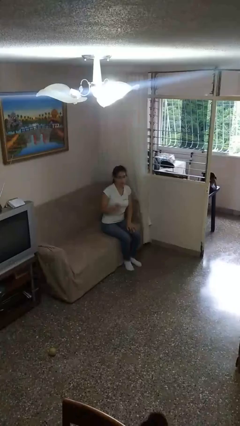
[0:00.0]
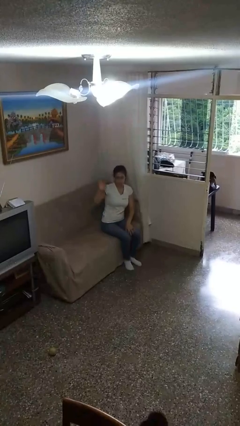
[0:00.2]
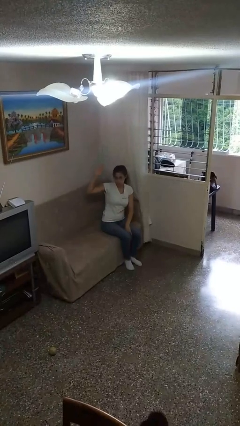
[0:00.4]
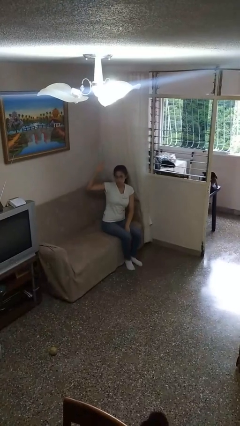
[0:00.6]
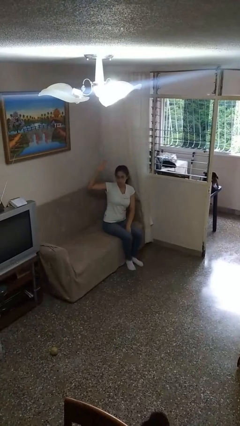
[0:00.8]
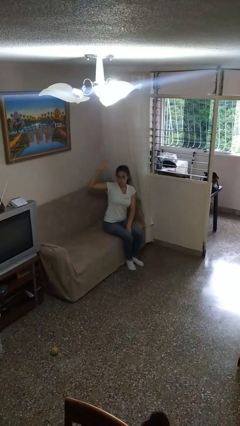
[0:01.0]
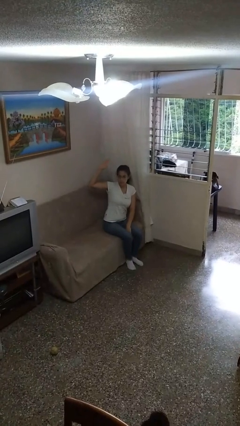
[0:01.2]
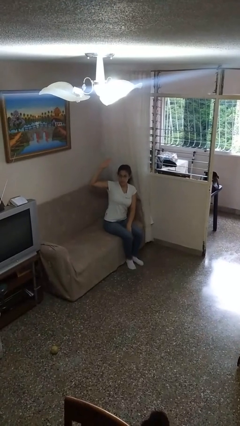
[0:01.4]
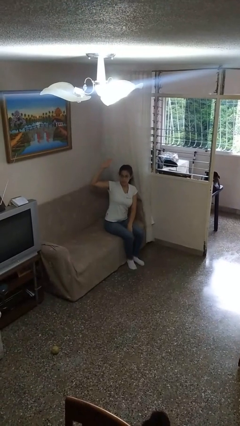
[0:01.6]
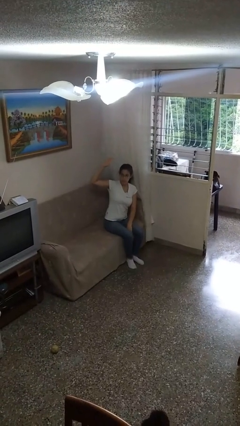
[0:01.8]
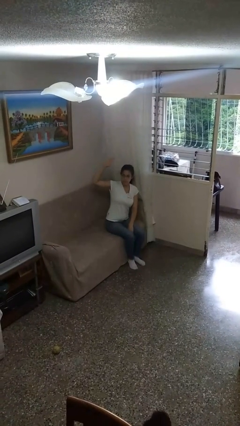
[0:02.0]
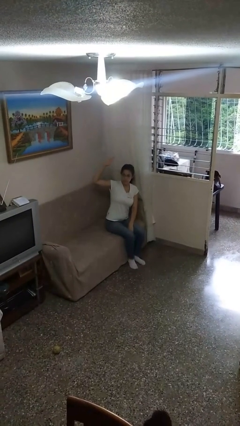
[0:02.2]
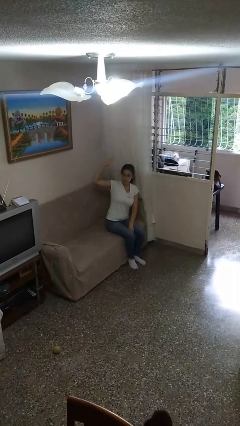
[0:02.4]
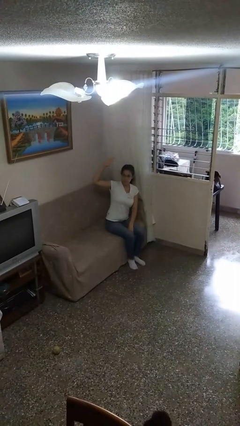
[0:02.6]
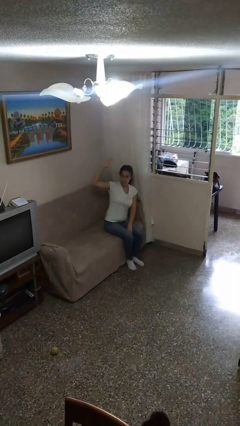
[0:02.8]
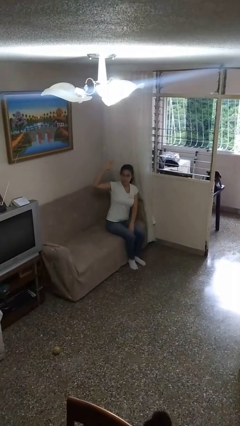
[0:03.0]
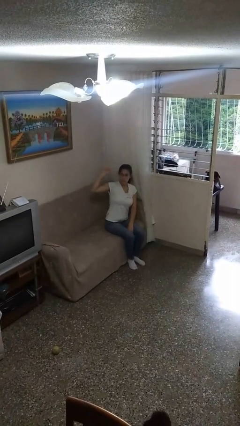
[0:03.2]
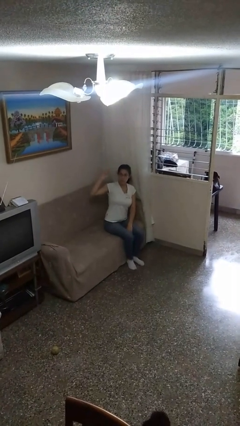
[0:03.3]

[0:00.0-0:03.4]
person gestures raise hand

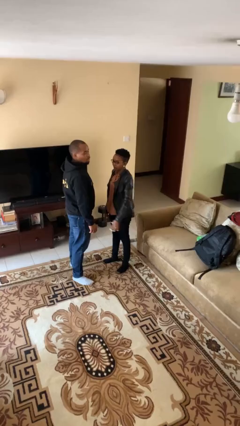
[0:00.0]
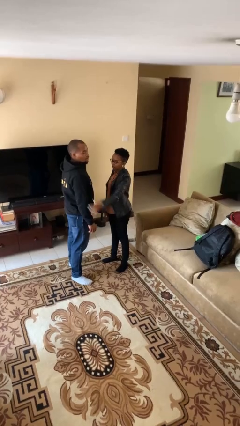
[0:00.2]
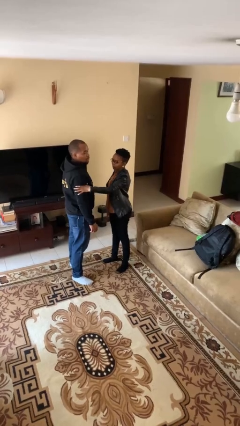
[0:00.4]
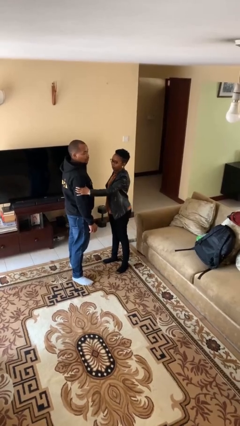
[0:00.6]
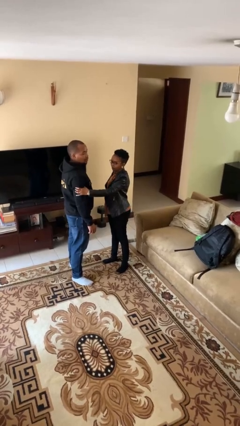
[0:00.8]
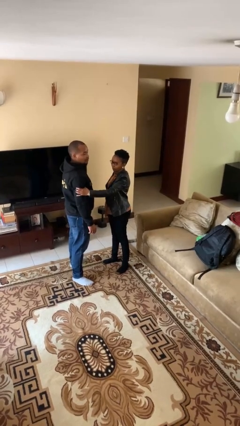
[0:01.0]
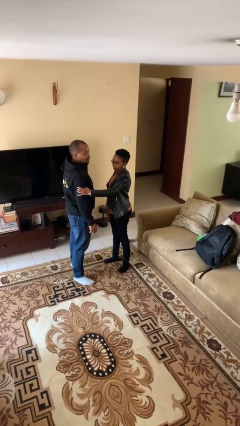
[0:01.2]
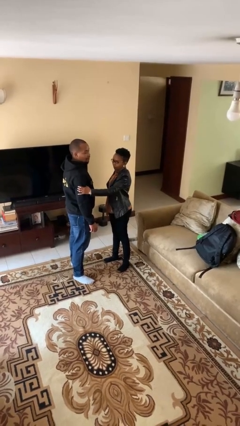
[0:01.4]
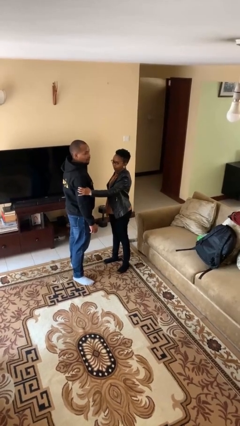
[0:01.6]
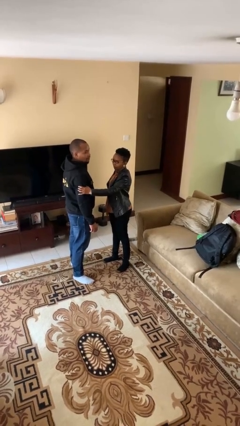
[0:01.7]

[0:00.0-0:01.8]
person grabs person by bicep

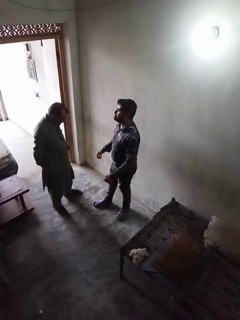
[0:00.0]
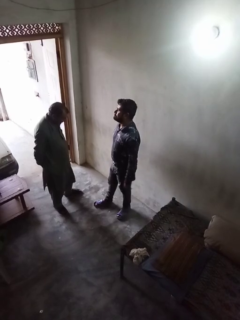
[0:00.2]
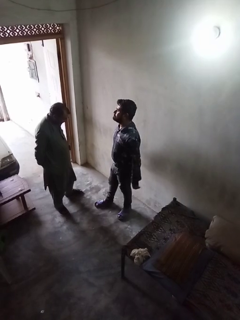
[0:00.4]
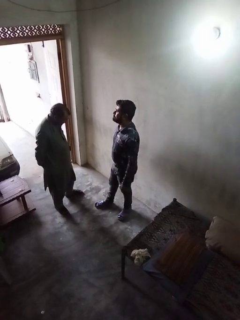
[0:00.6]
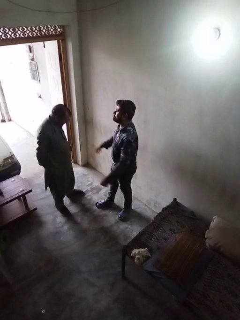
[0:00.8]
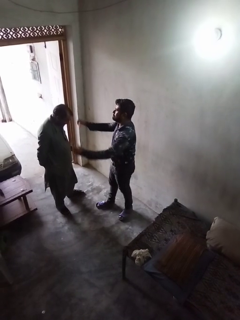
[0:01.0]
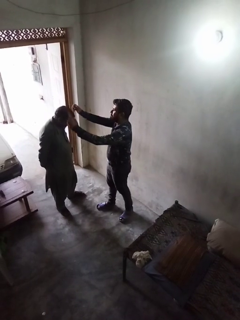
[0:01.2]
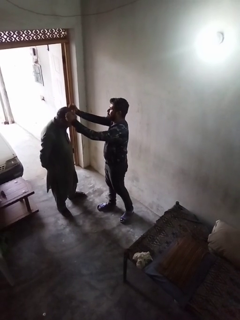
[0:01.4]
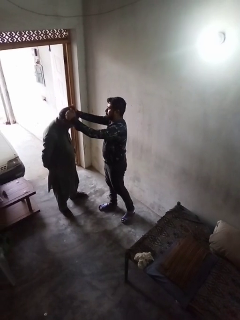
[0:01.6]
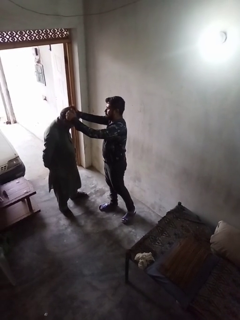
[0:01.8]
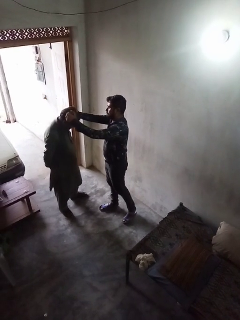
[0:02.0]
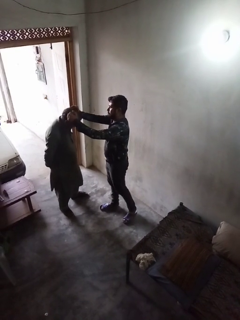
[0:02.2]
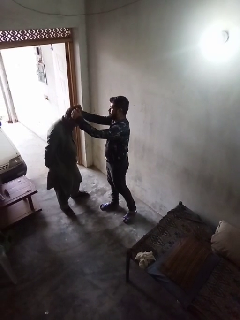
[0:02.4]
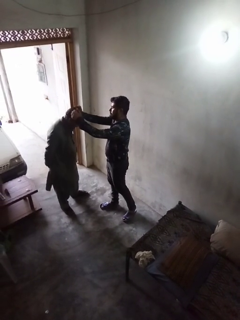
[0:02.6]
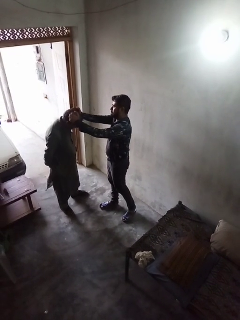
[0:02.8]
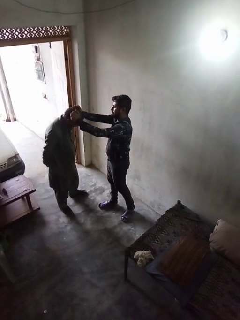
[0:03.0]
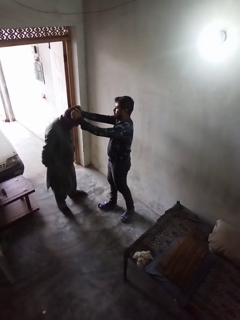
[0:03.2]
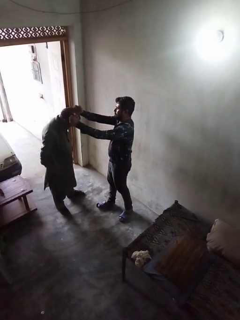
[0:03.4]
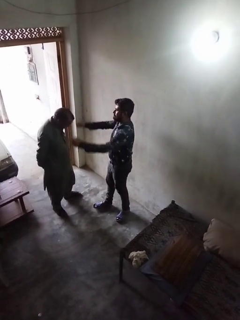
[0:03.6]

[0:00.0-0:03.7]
person grabs person by hair

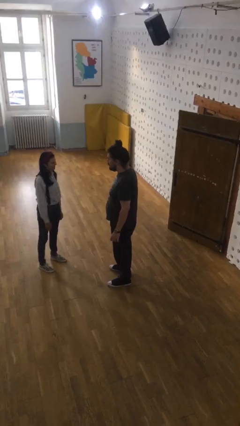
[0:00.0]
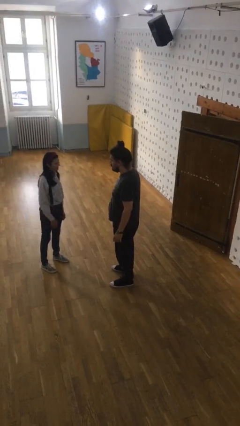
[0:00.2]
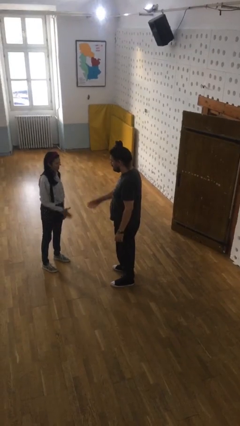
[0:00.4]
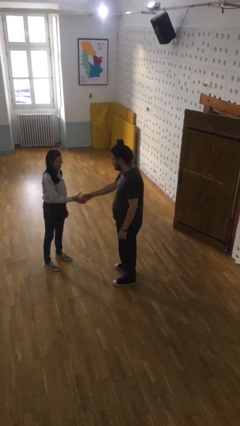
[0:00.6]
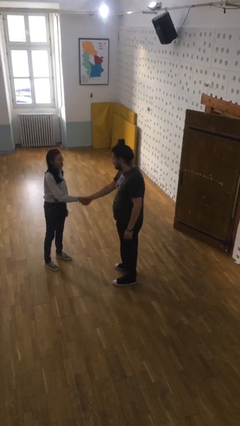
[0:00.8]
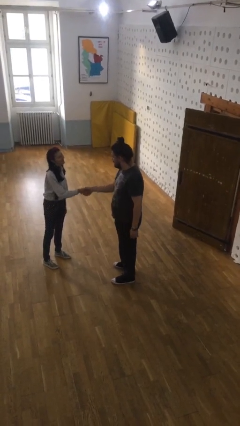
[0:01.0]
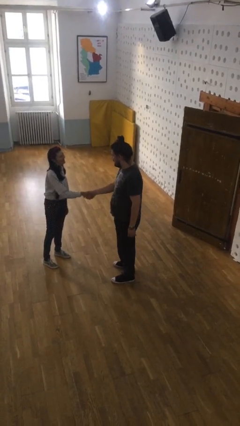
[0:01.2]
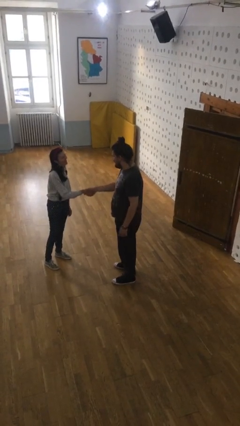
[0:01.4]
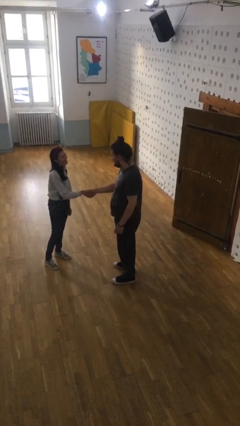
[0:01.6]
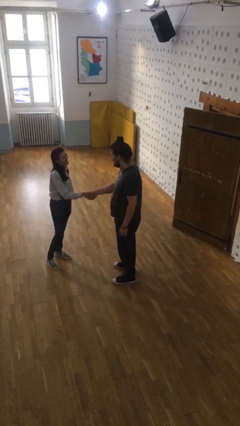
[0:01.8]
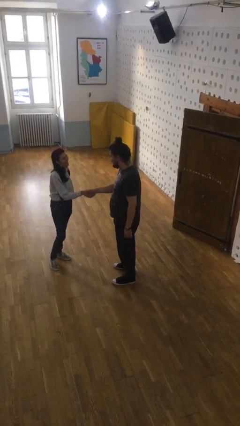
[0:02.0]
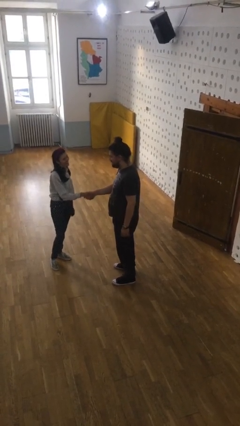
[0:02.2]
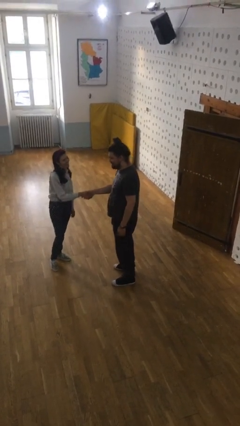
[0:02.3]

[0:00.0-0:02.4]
person shakes hand

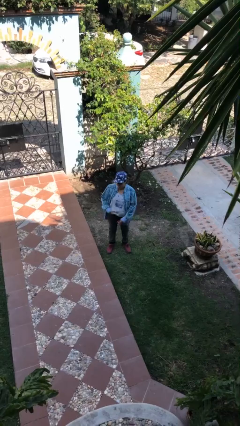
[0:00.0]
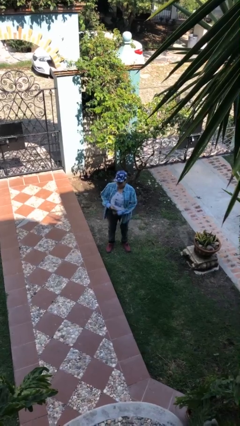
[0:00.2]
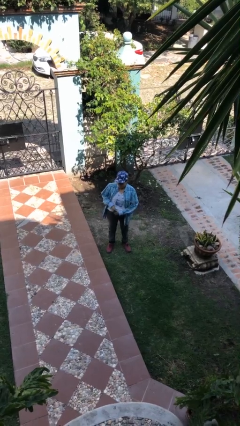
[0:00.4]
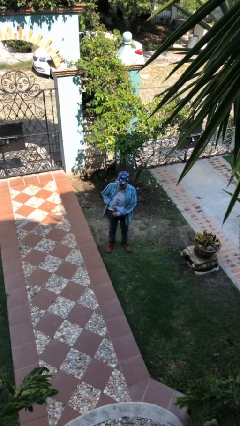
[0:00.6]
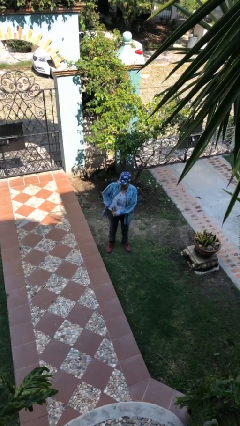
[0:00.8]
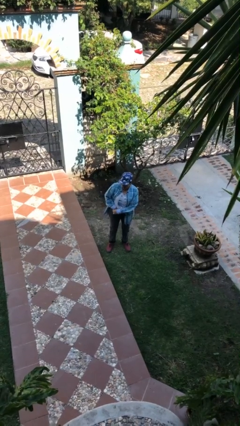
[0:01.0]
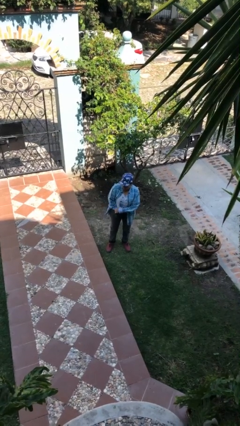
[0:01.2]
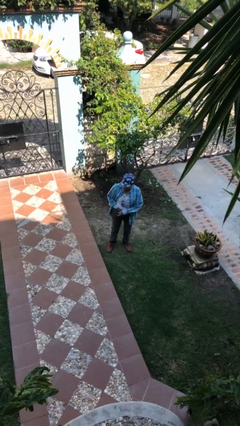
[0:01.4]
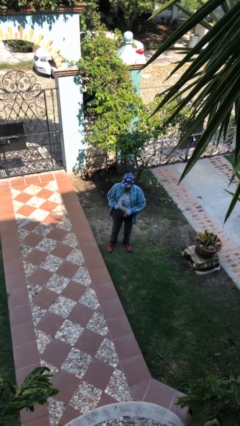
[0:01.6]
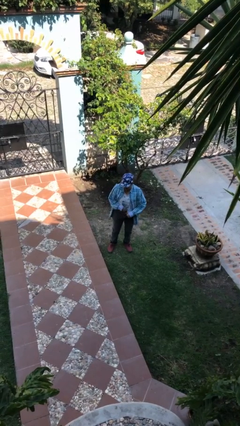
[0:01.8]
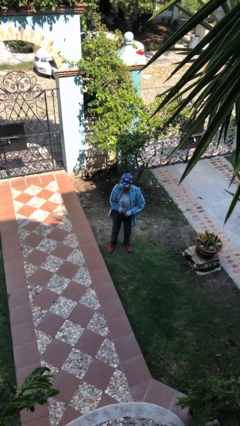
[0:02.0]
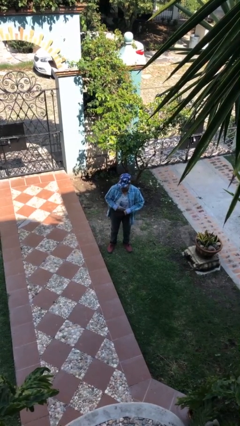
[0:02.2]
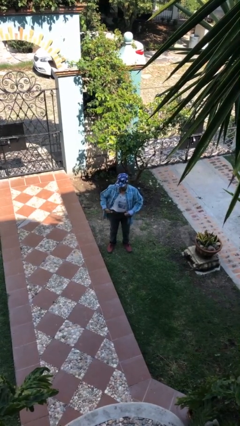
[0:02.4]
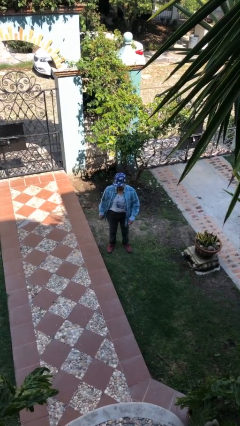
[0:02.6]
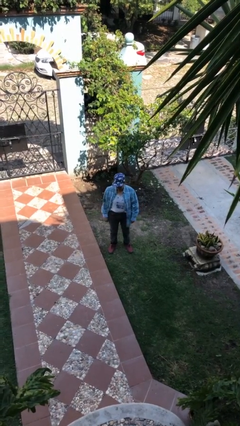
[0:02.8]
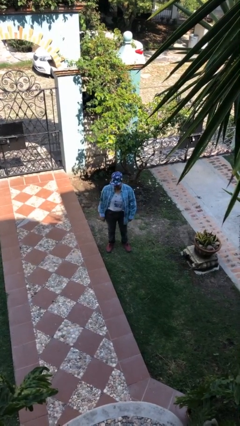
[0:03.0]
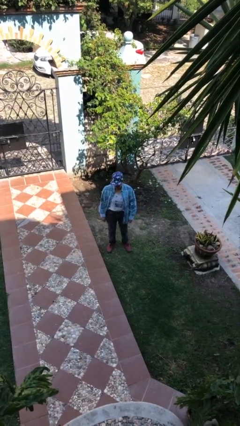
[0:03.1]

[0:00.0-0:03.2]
person tucks in shirt

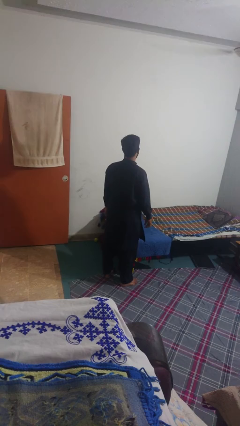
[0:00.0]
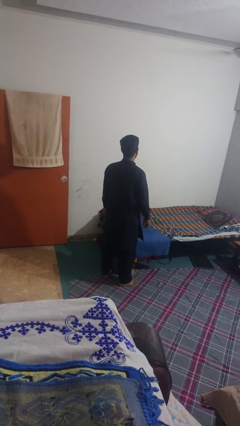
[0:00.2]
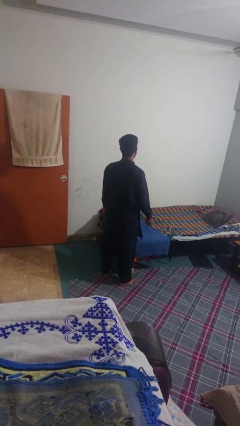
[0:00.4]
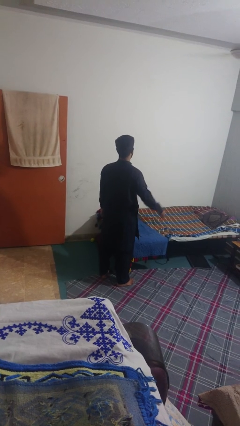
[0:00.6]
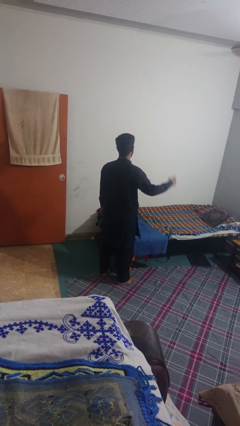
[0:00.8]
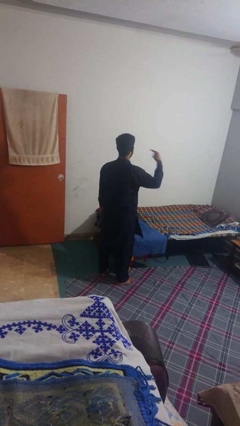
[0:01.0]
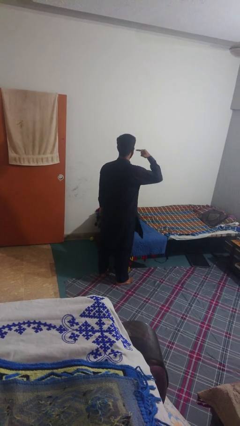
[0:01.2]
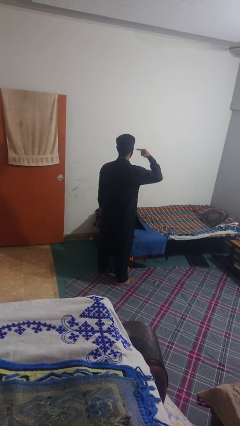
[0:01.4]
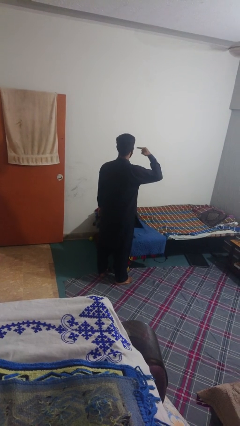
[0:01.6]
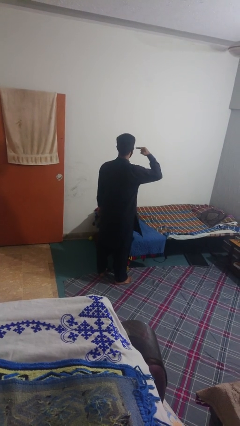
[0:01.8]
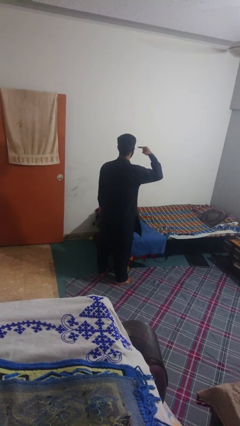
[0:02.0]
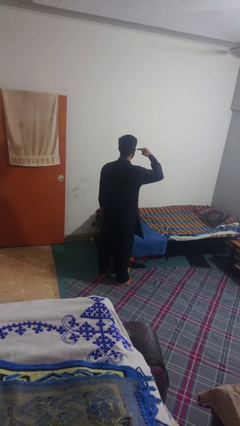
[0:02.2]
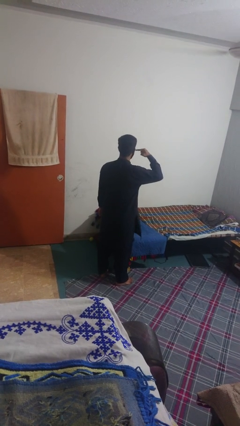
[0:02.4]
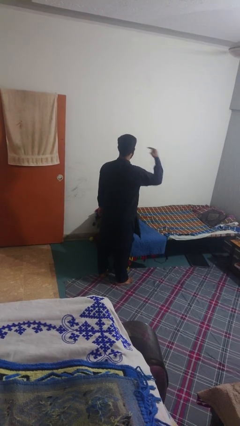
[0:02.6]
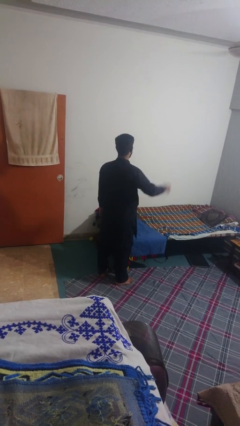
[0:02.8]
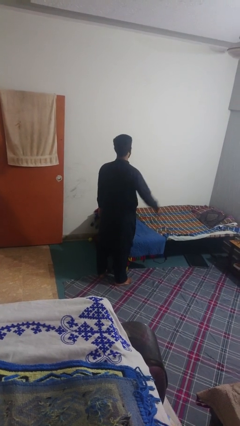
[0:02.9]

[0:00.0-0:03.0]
person gestures listen closely

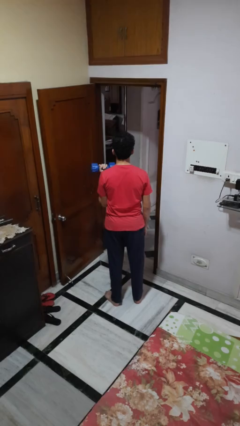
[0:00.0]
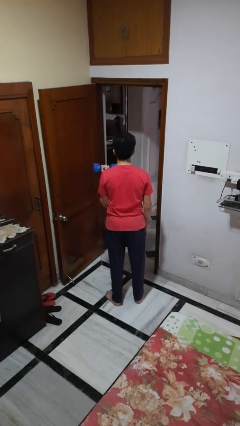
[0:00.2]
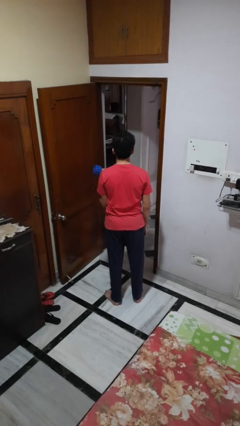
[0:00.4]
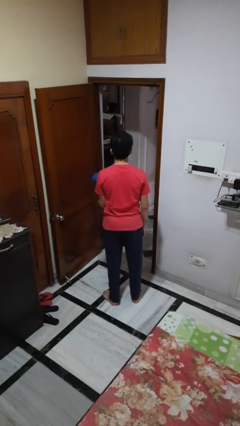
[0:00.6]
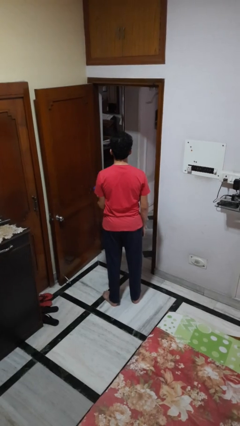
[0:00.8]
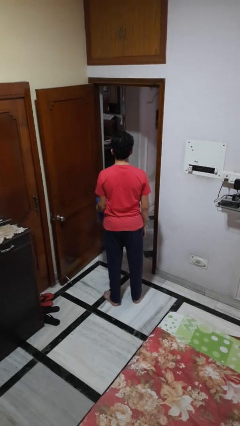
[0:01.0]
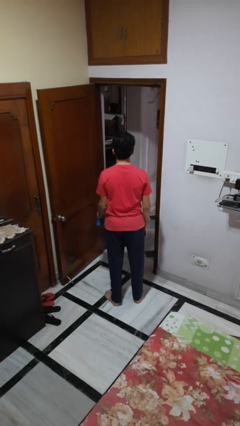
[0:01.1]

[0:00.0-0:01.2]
person lifts dumbbells
